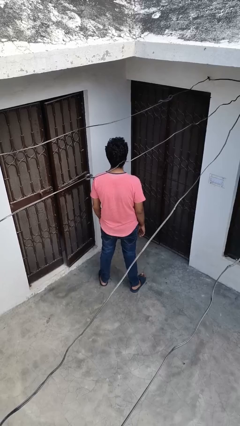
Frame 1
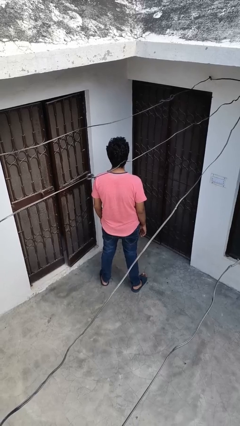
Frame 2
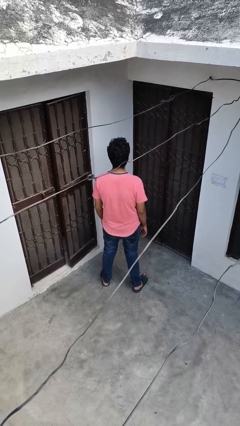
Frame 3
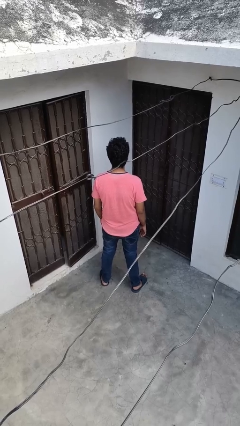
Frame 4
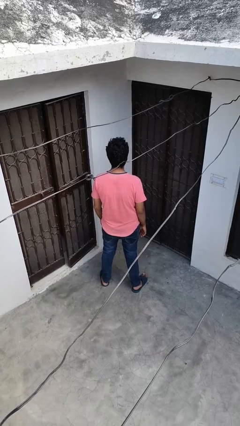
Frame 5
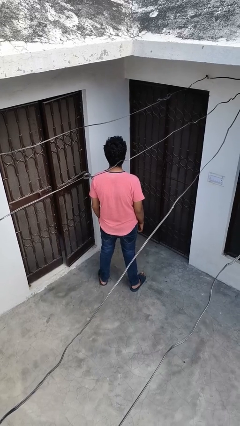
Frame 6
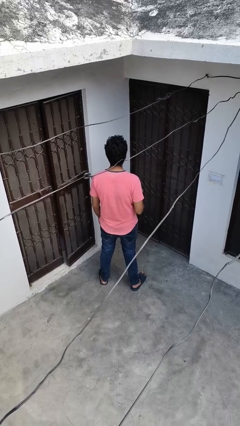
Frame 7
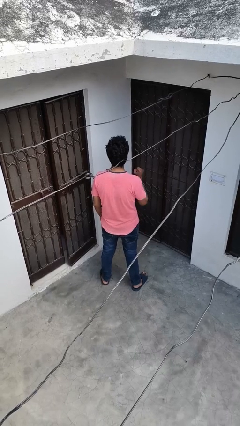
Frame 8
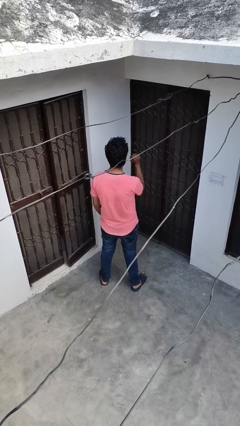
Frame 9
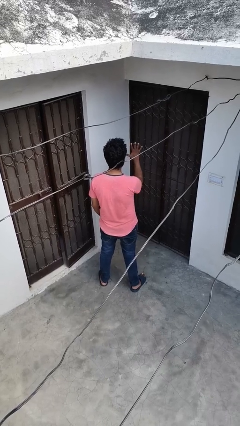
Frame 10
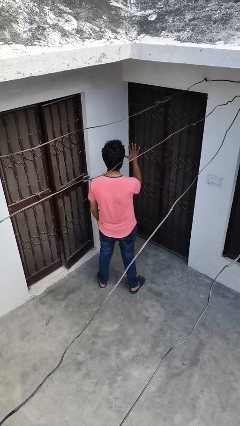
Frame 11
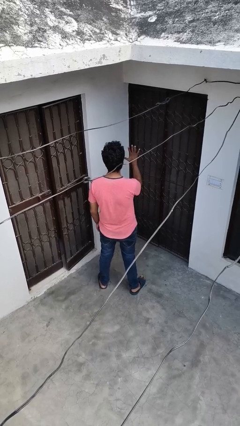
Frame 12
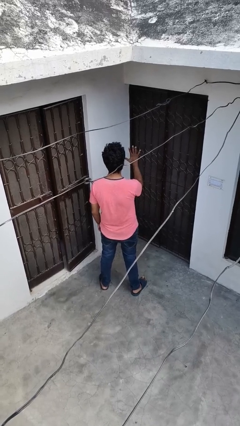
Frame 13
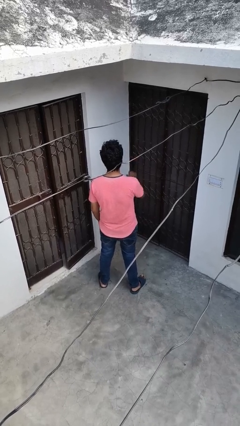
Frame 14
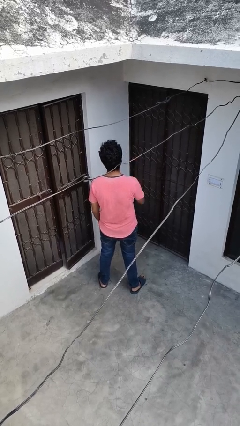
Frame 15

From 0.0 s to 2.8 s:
person gestures number five

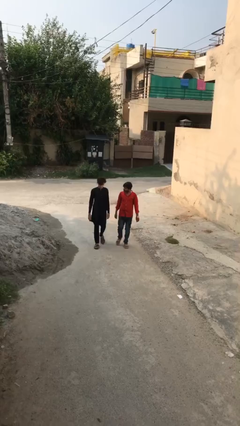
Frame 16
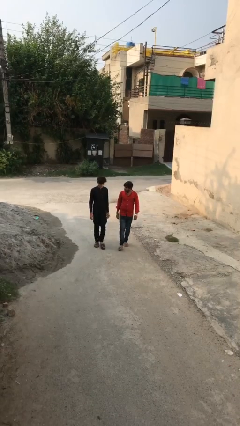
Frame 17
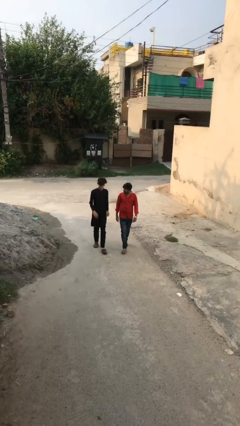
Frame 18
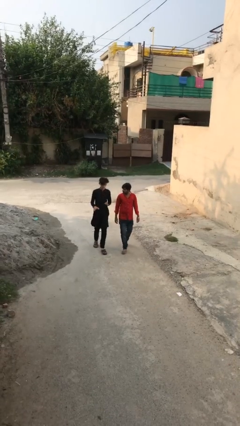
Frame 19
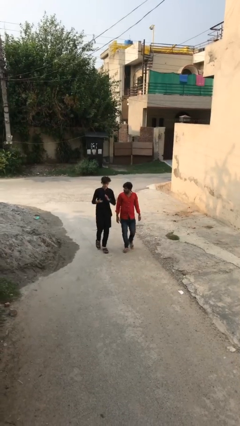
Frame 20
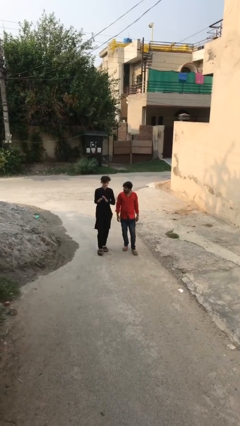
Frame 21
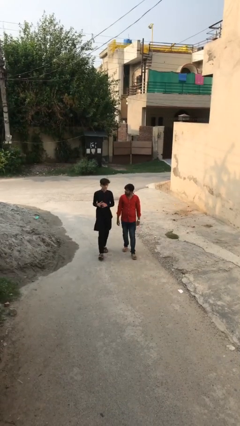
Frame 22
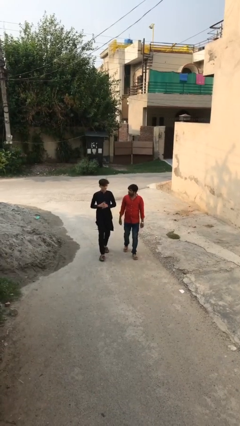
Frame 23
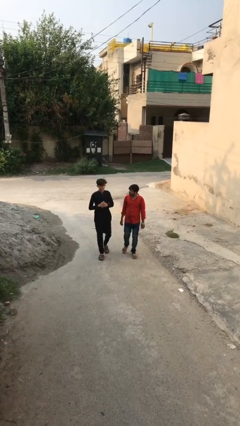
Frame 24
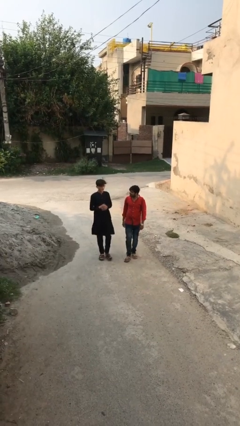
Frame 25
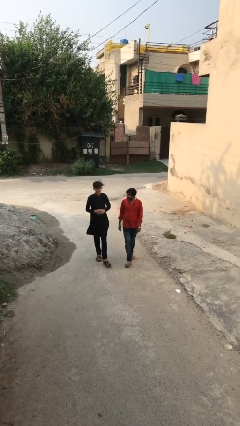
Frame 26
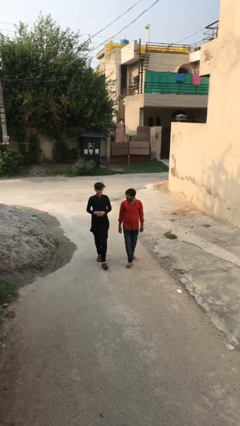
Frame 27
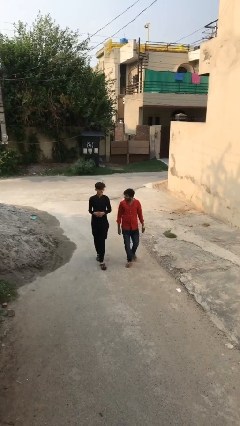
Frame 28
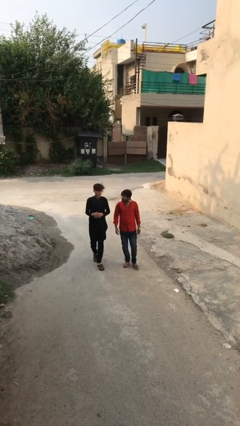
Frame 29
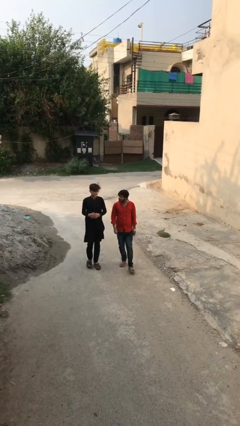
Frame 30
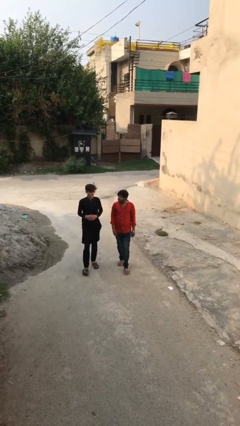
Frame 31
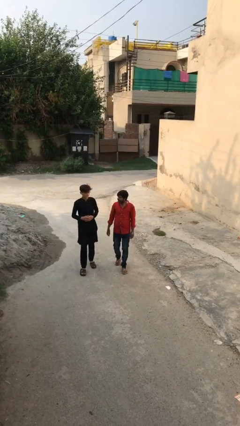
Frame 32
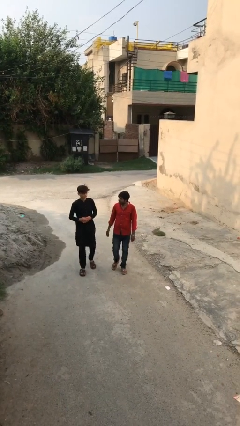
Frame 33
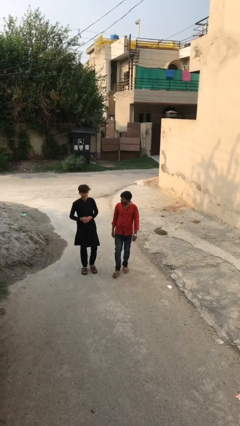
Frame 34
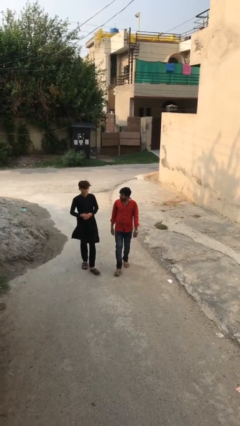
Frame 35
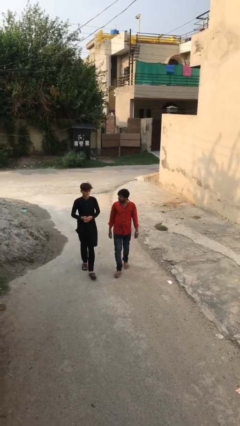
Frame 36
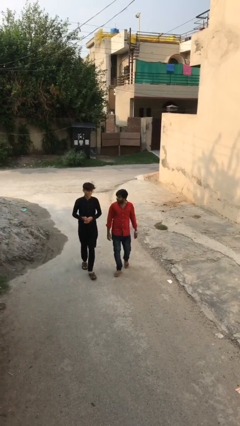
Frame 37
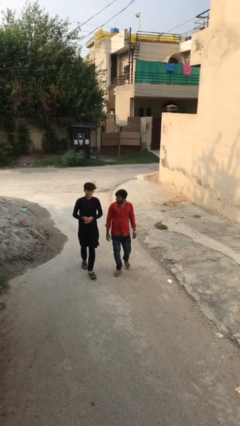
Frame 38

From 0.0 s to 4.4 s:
person talks to person

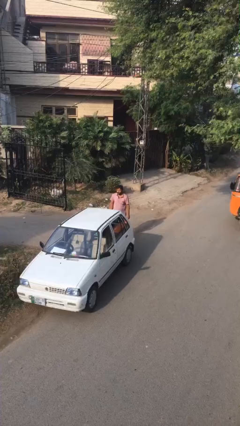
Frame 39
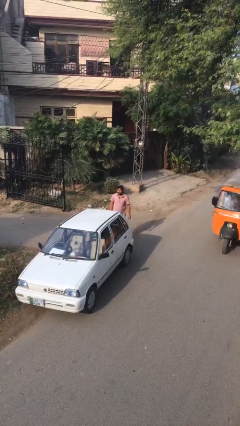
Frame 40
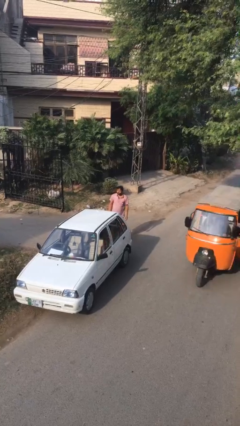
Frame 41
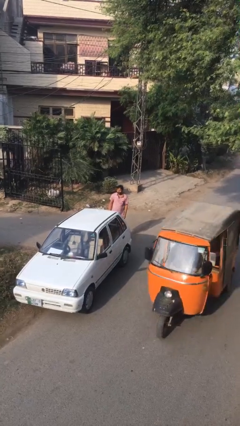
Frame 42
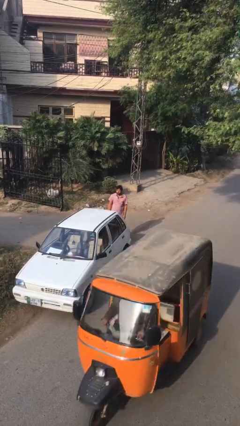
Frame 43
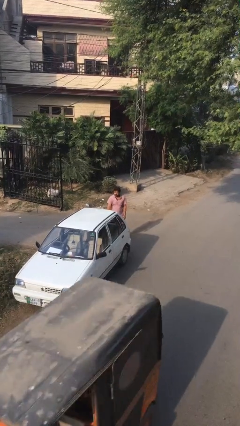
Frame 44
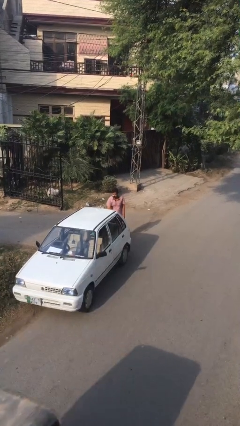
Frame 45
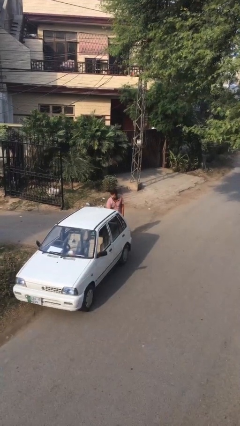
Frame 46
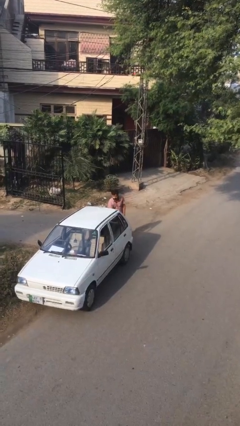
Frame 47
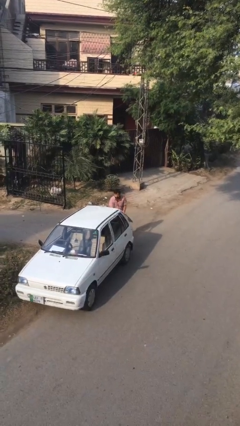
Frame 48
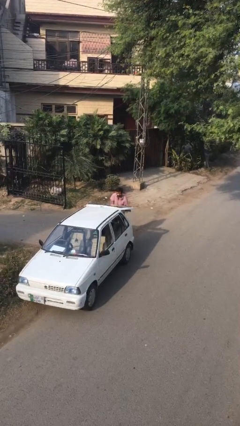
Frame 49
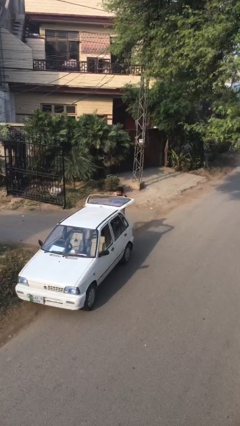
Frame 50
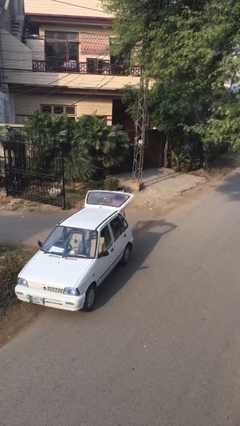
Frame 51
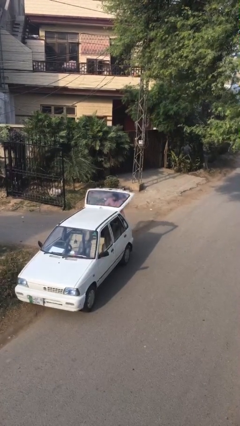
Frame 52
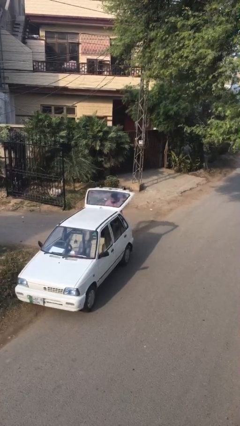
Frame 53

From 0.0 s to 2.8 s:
person unloads car

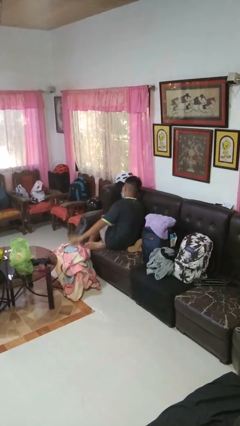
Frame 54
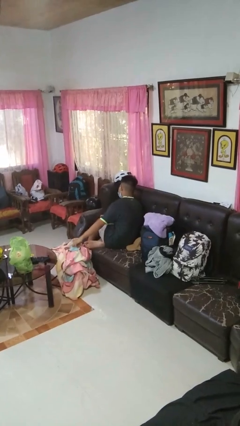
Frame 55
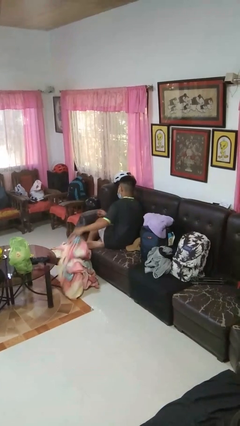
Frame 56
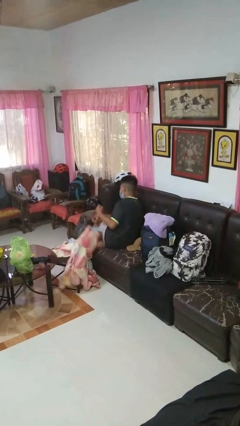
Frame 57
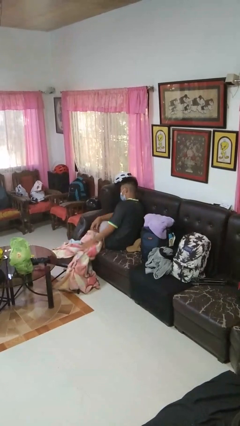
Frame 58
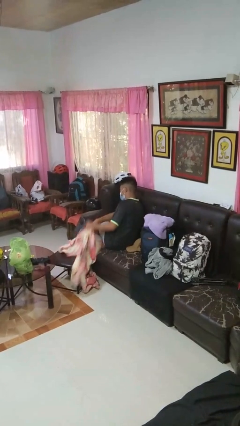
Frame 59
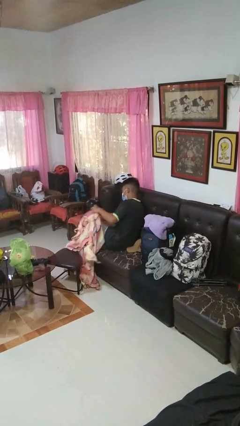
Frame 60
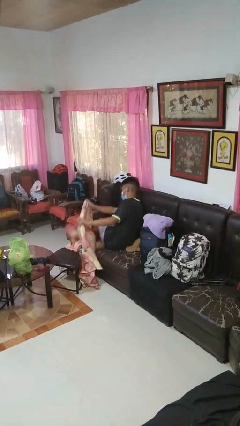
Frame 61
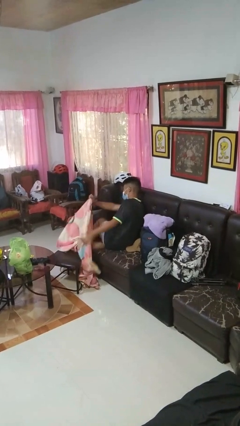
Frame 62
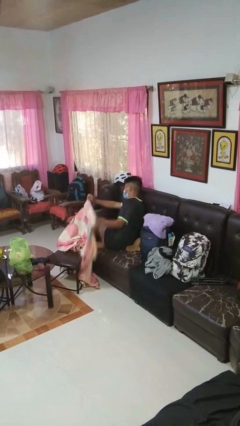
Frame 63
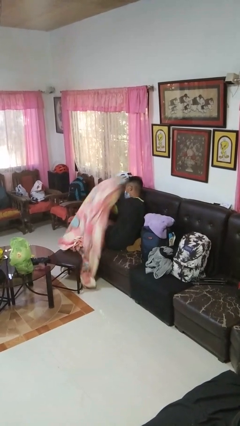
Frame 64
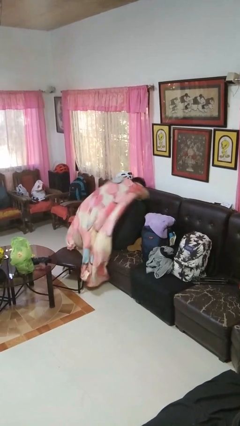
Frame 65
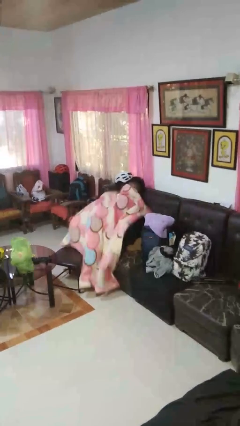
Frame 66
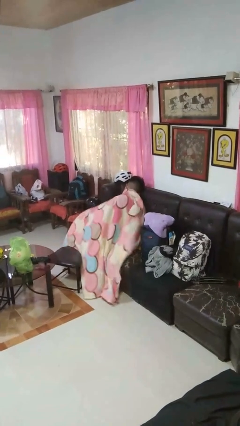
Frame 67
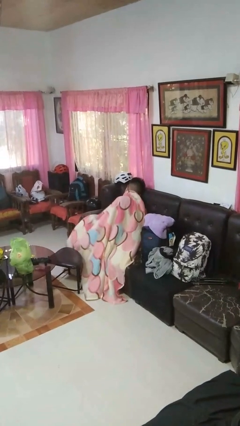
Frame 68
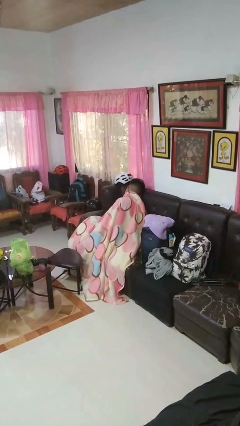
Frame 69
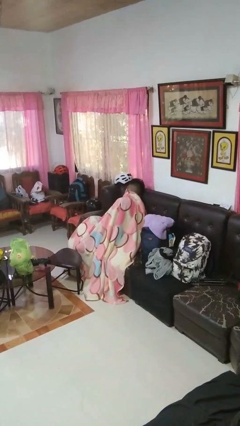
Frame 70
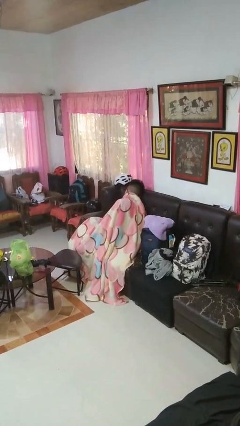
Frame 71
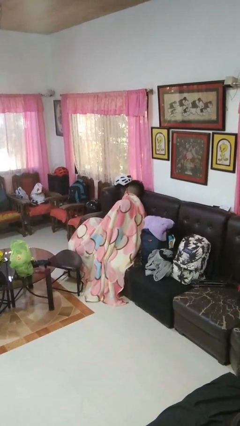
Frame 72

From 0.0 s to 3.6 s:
person covers with blanket

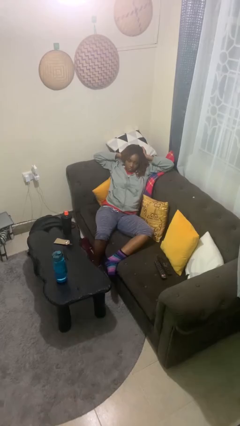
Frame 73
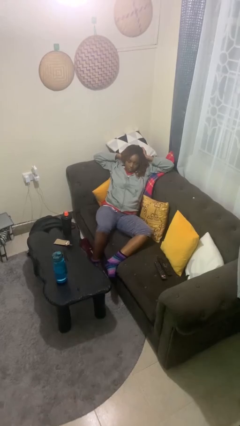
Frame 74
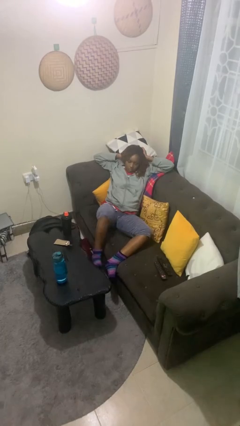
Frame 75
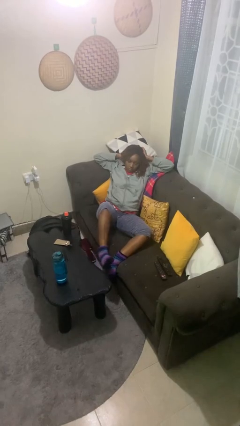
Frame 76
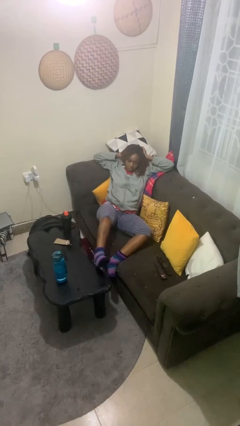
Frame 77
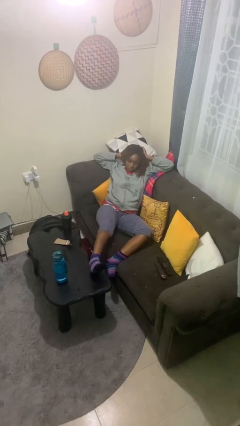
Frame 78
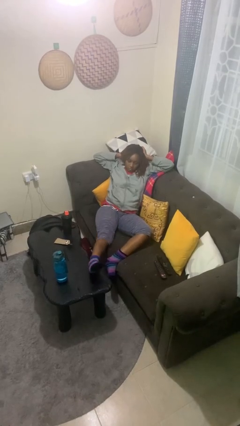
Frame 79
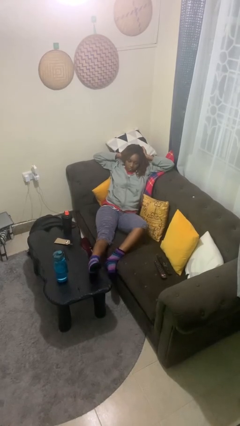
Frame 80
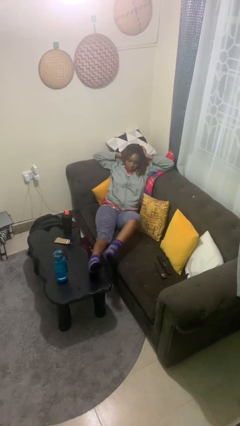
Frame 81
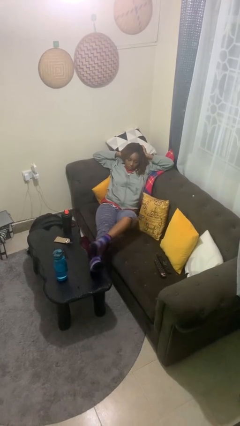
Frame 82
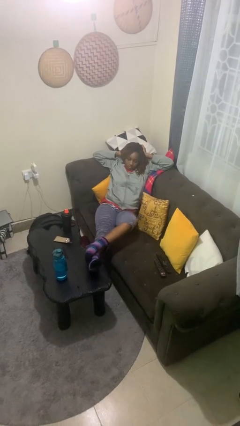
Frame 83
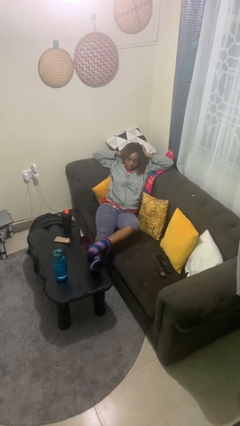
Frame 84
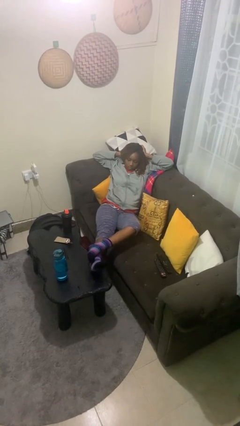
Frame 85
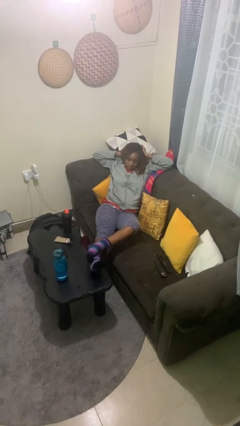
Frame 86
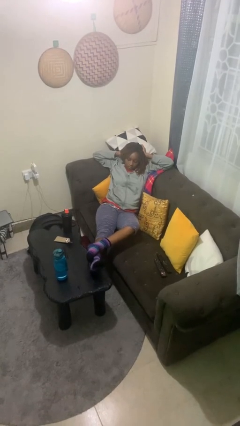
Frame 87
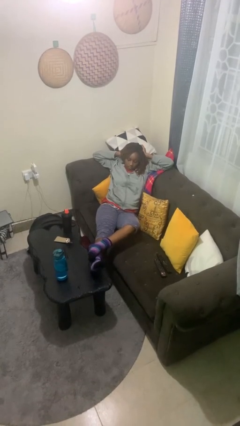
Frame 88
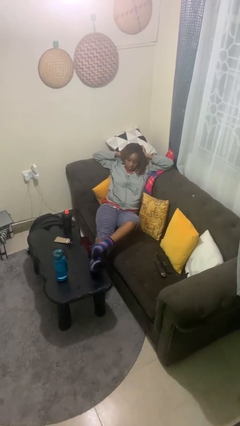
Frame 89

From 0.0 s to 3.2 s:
person puts feet up

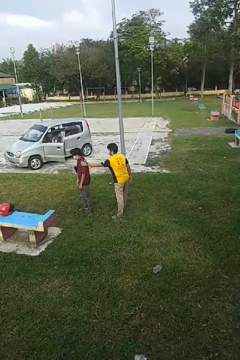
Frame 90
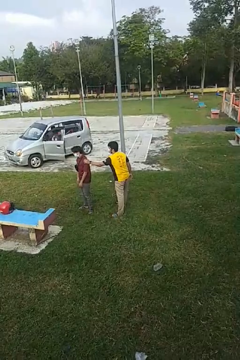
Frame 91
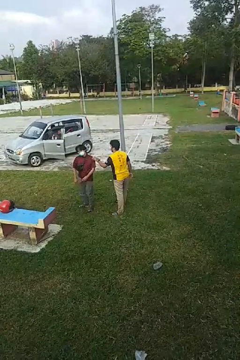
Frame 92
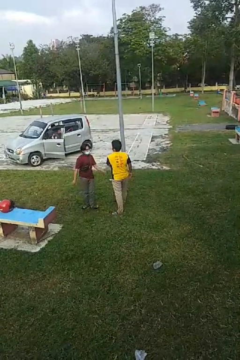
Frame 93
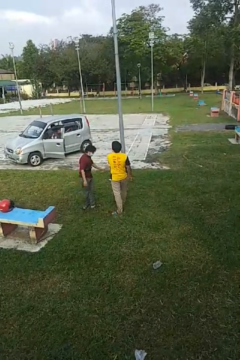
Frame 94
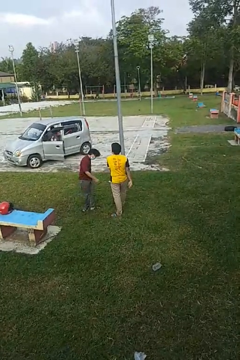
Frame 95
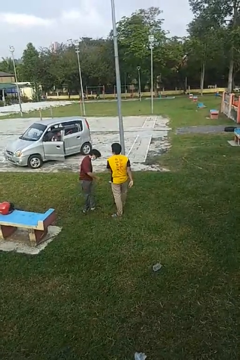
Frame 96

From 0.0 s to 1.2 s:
person spins person around
